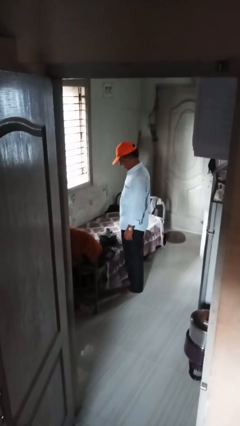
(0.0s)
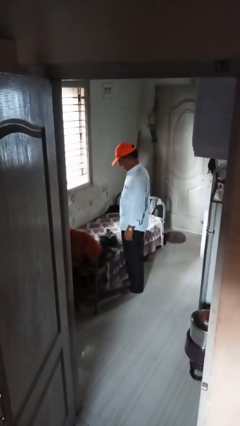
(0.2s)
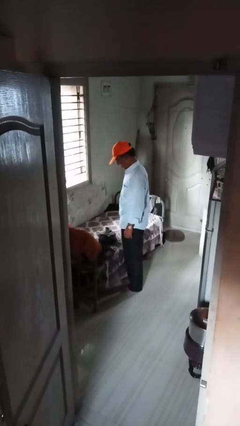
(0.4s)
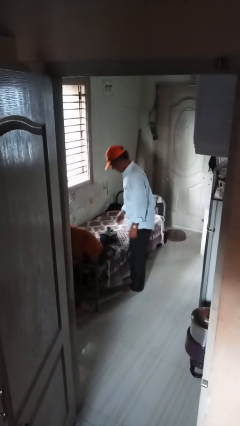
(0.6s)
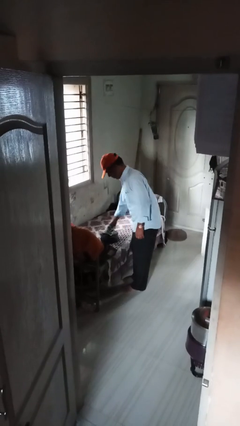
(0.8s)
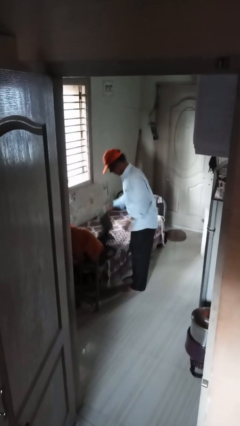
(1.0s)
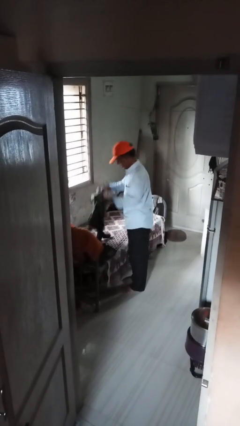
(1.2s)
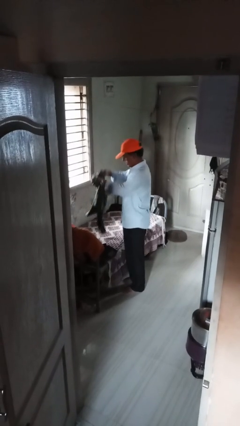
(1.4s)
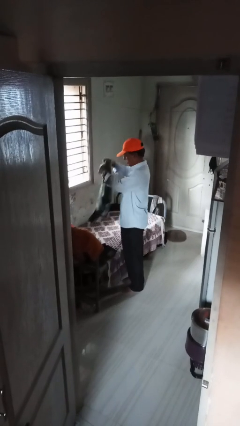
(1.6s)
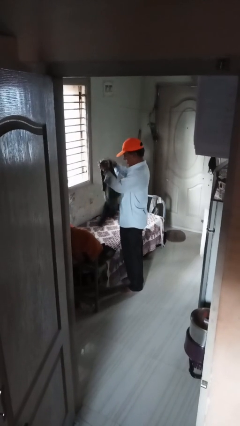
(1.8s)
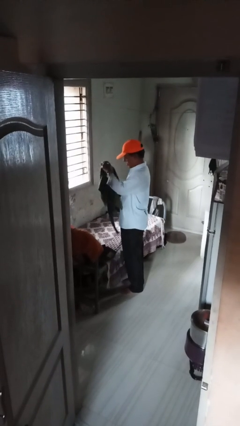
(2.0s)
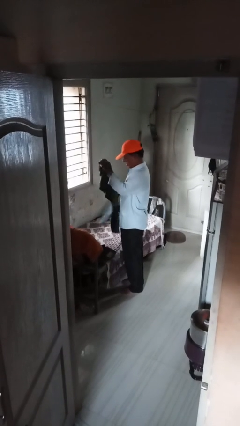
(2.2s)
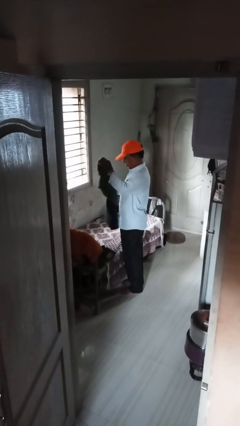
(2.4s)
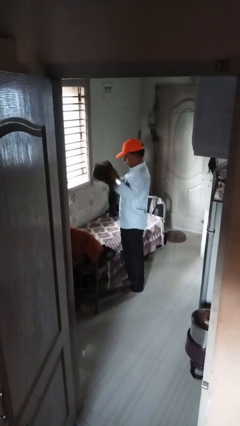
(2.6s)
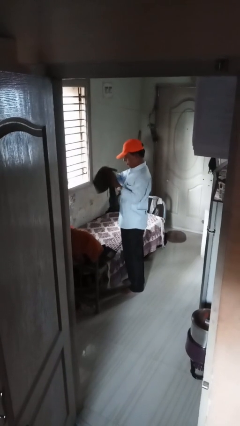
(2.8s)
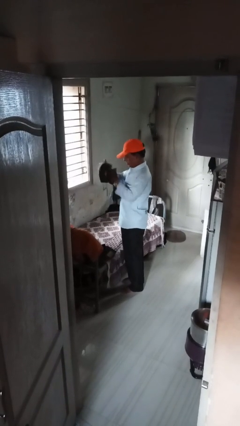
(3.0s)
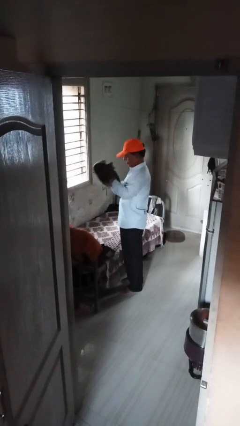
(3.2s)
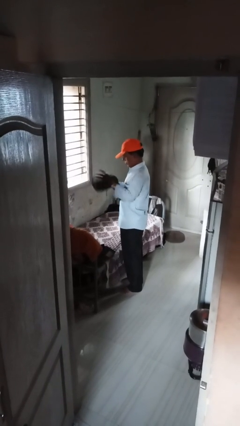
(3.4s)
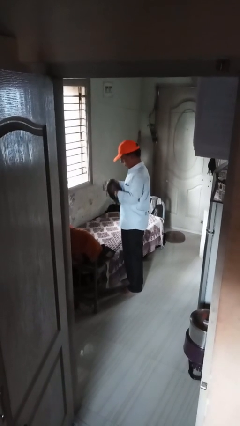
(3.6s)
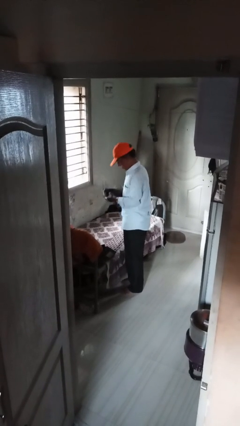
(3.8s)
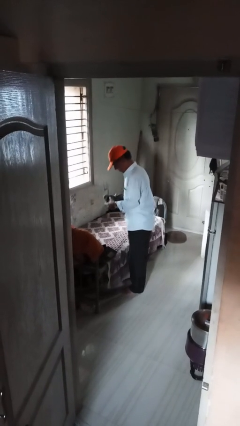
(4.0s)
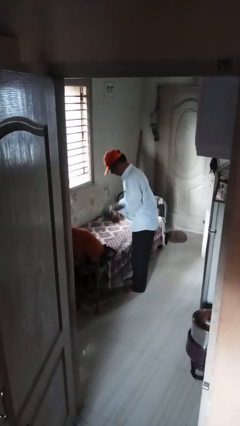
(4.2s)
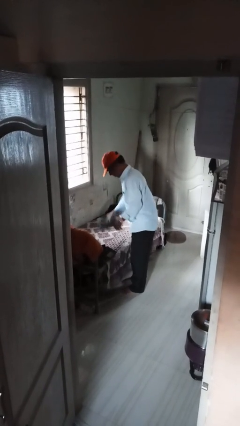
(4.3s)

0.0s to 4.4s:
person folds shirt

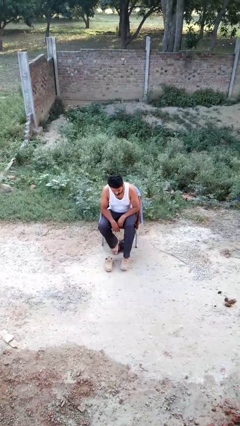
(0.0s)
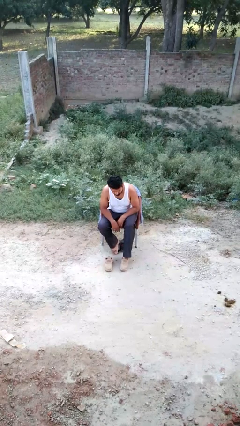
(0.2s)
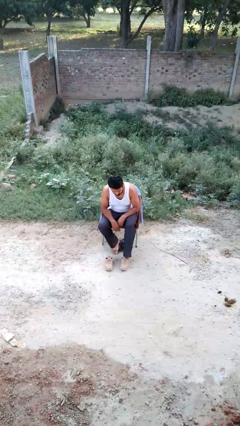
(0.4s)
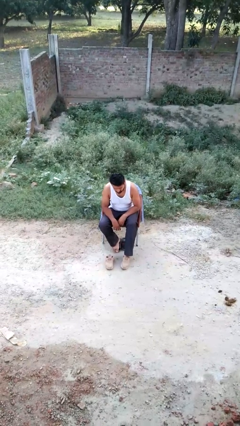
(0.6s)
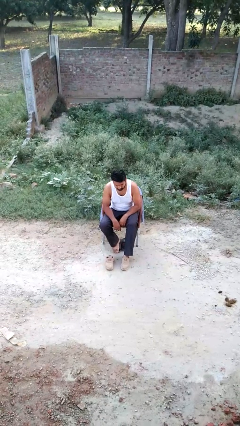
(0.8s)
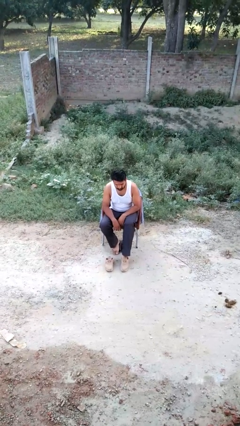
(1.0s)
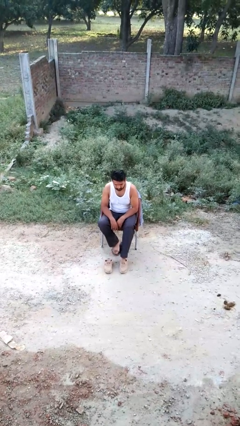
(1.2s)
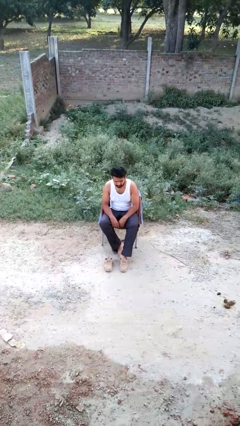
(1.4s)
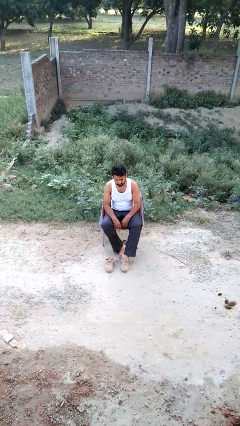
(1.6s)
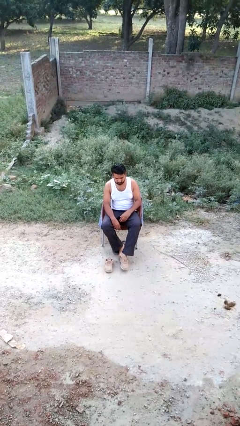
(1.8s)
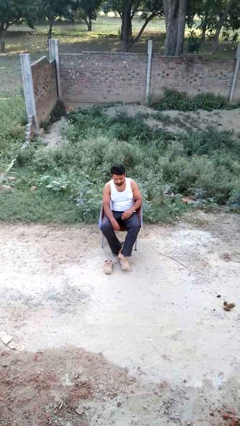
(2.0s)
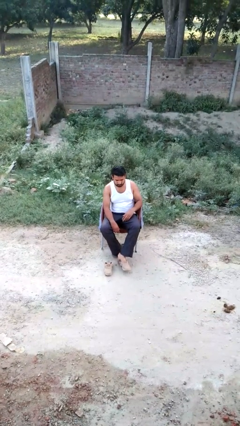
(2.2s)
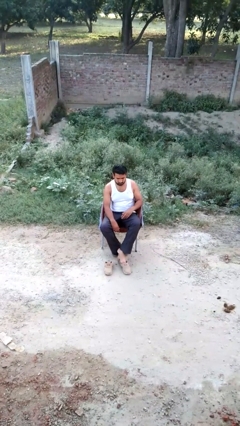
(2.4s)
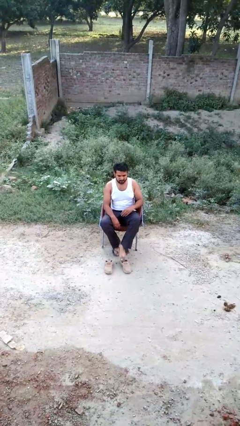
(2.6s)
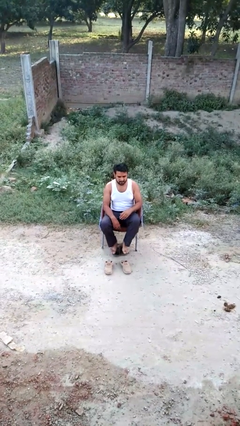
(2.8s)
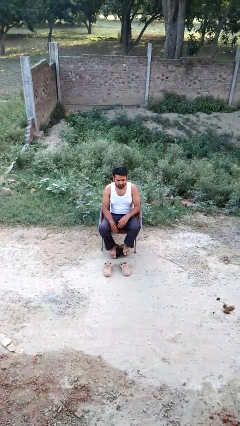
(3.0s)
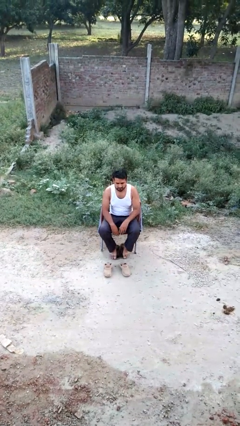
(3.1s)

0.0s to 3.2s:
person takes off shoes

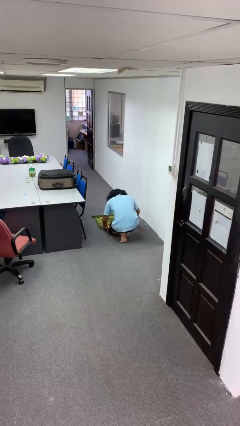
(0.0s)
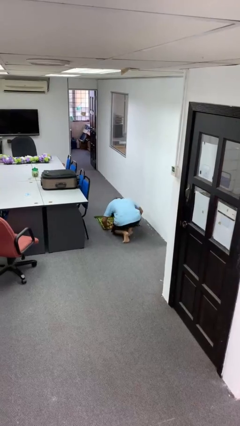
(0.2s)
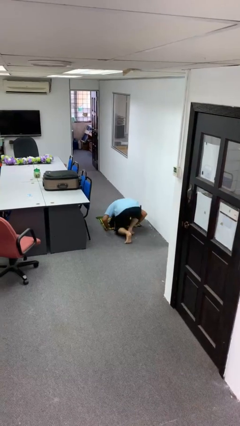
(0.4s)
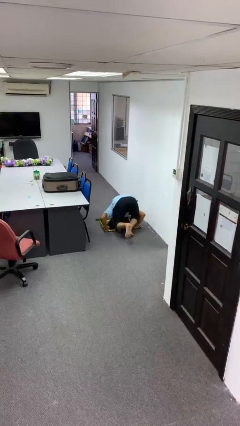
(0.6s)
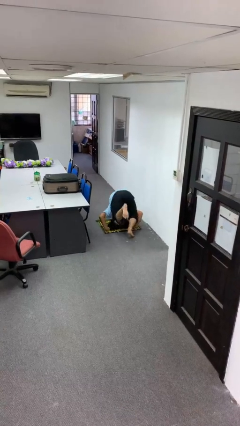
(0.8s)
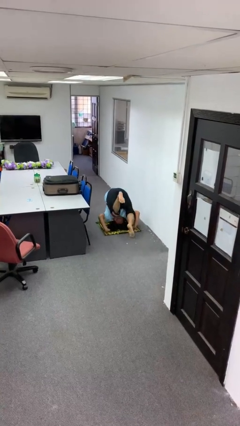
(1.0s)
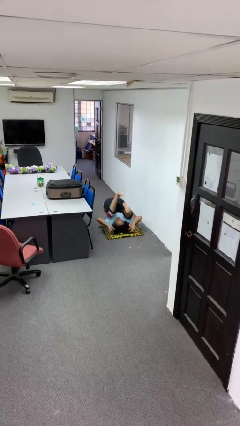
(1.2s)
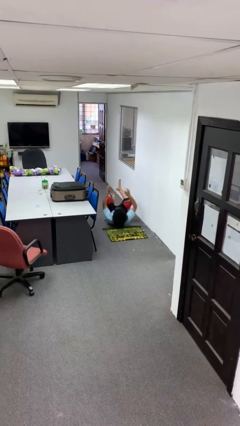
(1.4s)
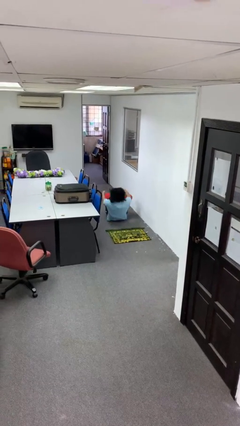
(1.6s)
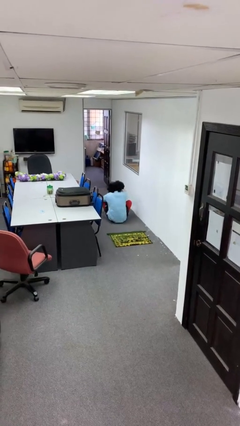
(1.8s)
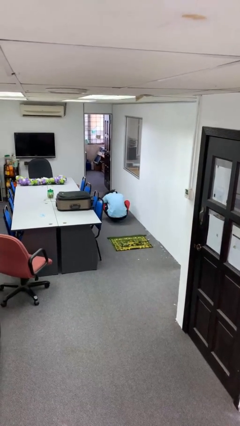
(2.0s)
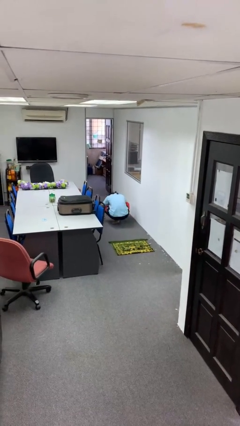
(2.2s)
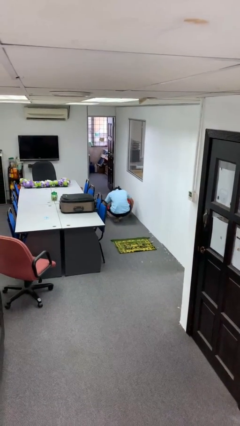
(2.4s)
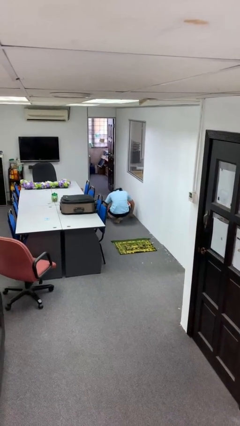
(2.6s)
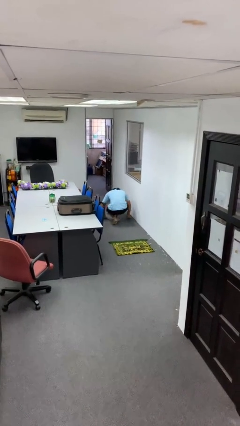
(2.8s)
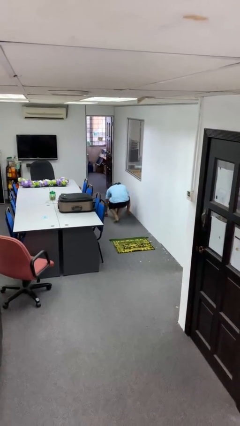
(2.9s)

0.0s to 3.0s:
person somersaults

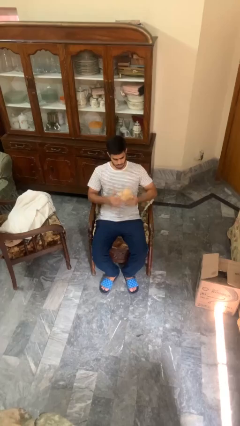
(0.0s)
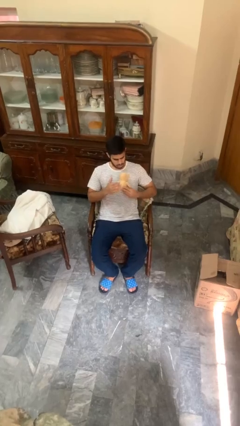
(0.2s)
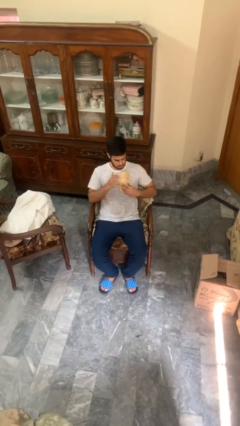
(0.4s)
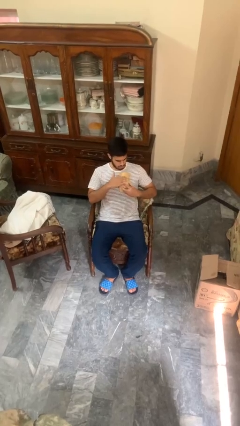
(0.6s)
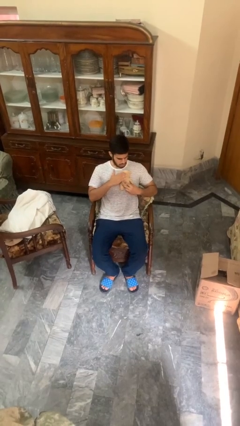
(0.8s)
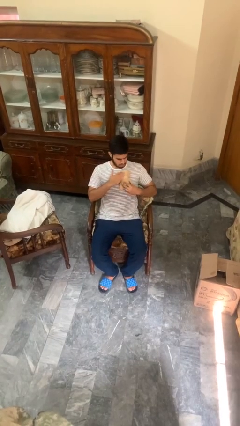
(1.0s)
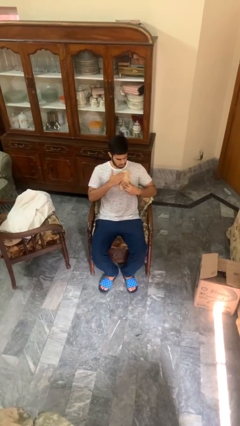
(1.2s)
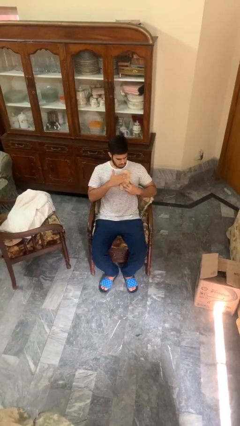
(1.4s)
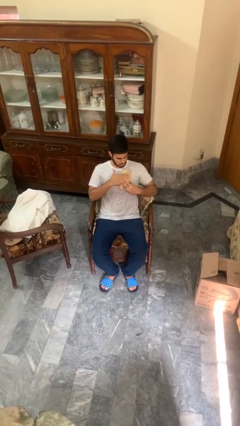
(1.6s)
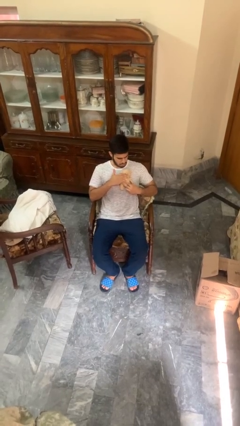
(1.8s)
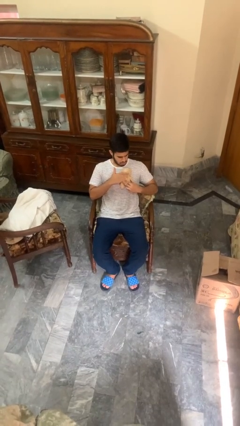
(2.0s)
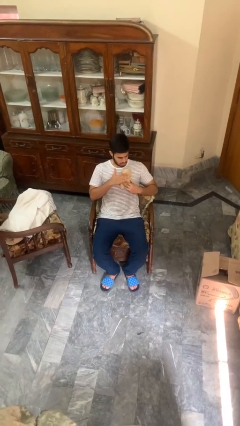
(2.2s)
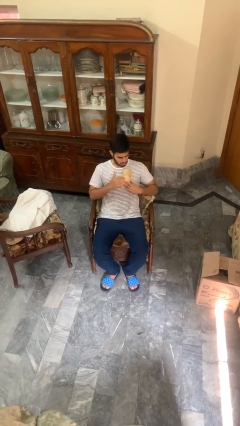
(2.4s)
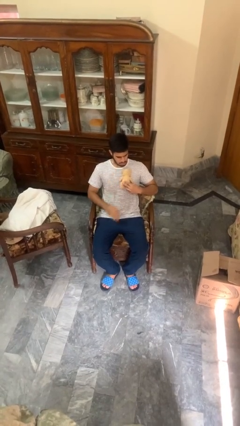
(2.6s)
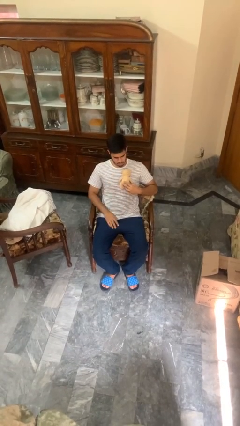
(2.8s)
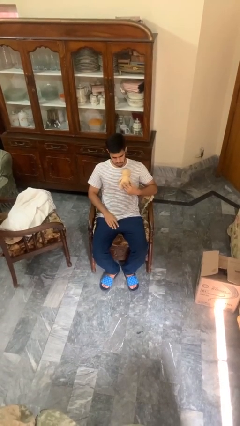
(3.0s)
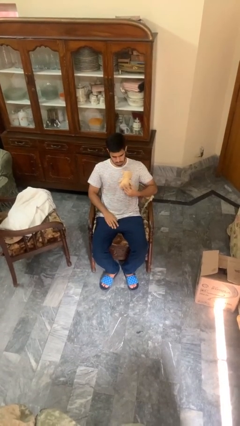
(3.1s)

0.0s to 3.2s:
person hugs stuffed animal

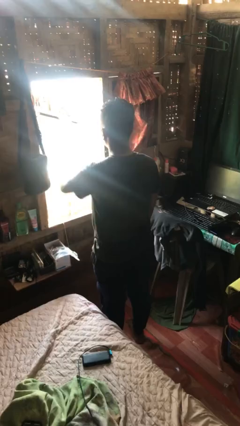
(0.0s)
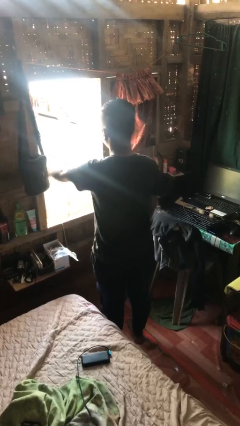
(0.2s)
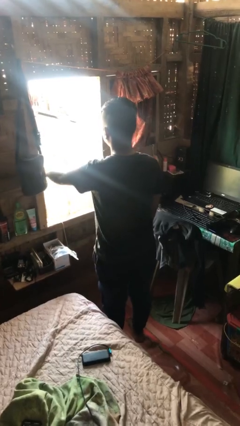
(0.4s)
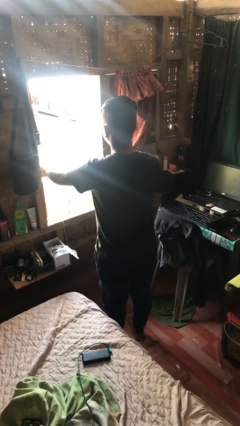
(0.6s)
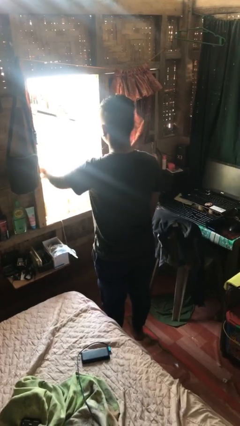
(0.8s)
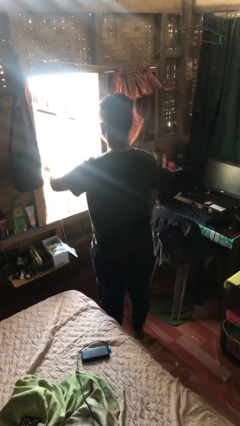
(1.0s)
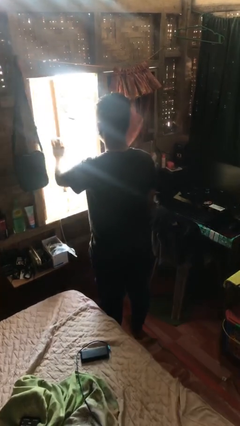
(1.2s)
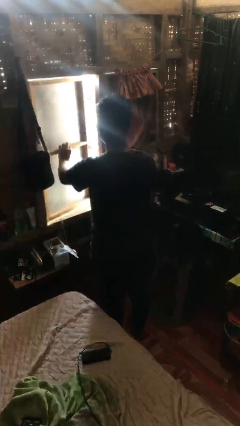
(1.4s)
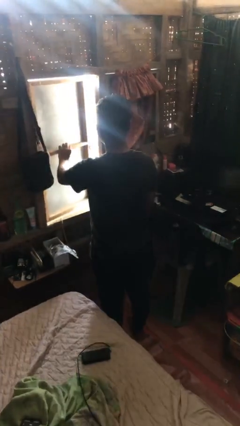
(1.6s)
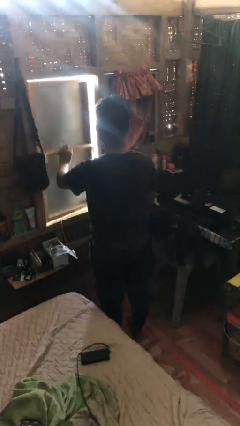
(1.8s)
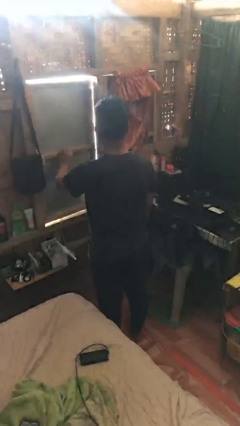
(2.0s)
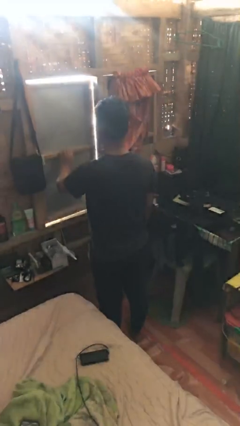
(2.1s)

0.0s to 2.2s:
person closes home window

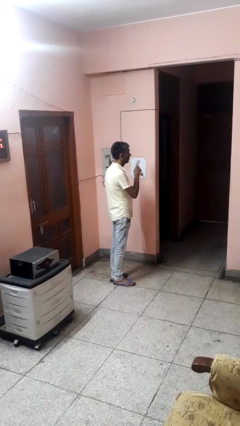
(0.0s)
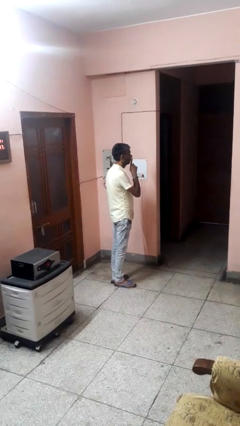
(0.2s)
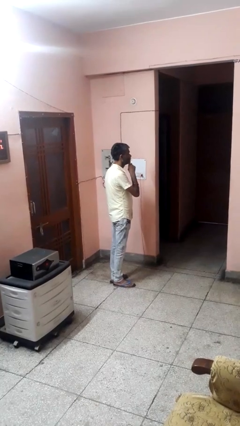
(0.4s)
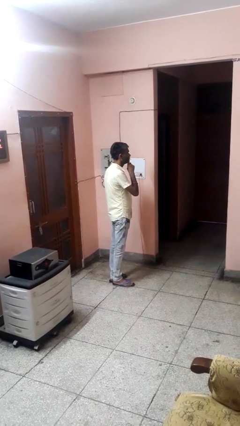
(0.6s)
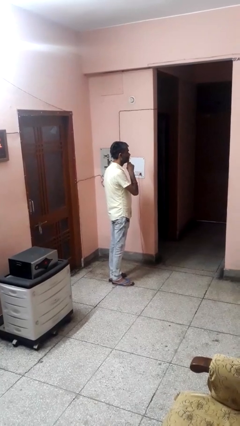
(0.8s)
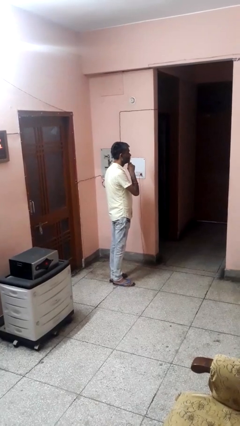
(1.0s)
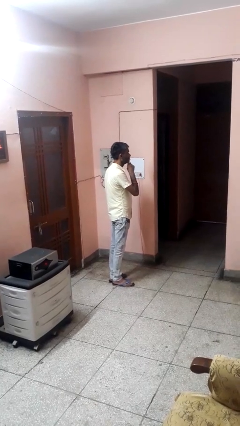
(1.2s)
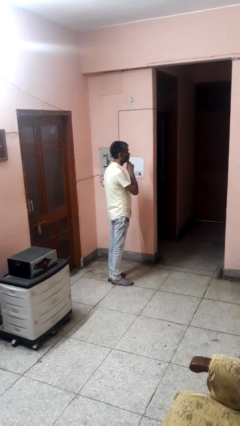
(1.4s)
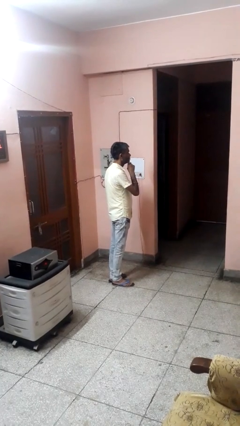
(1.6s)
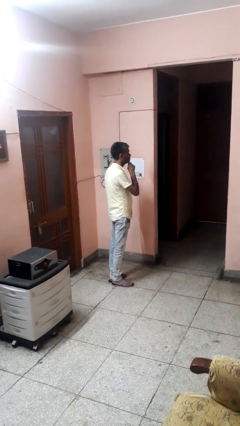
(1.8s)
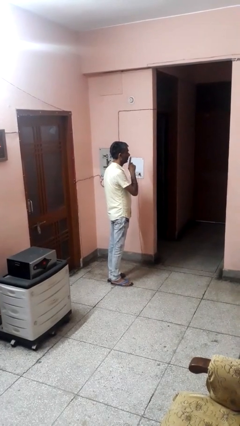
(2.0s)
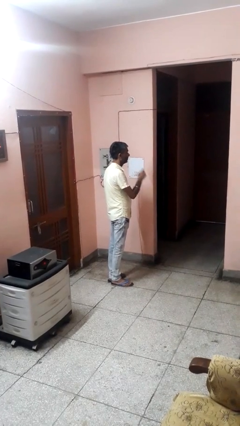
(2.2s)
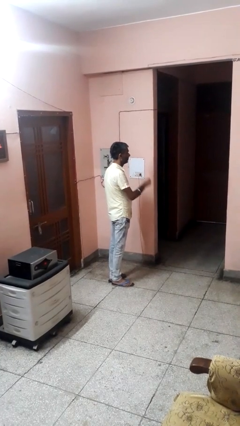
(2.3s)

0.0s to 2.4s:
person gestures be quiet
